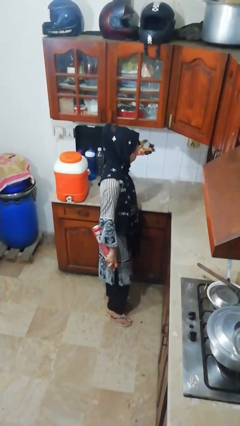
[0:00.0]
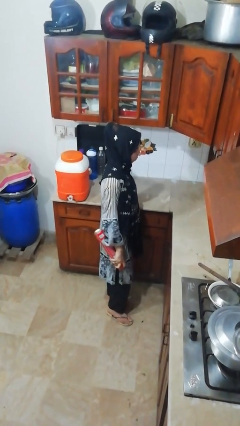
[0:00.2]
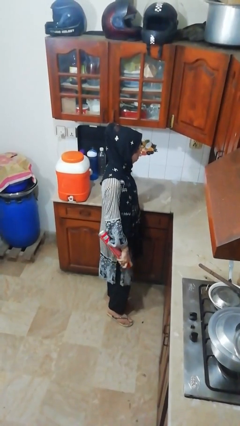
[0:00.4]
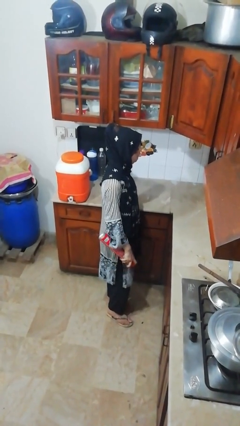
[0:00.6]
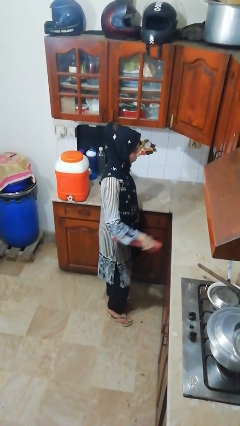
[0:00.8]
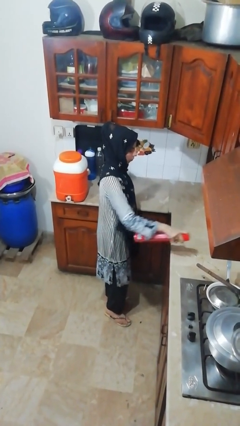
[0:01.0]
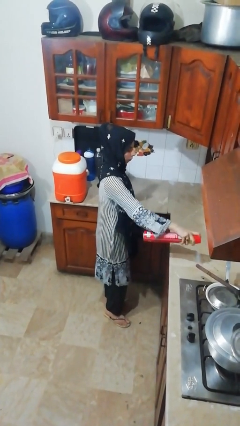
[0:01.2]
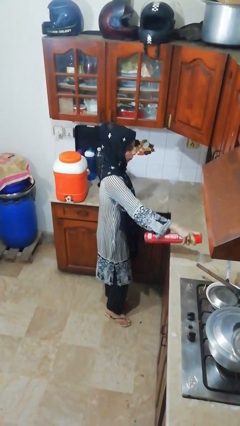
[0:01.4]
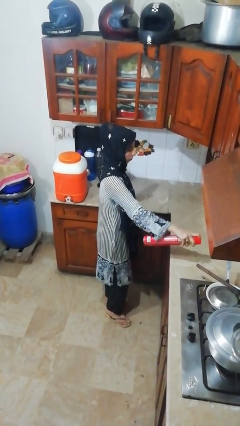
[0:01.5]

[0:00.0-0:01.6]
person sprays from bottle

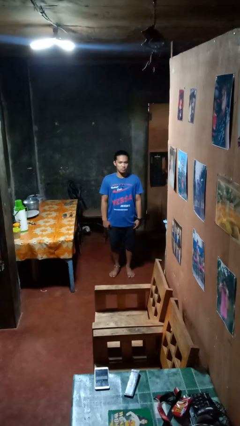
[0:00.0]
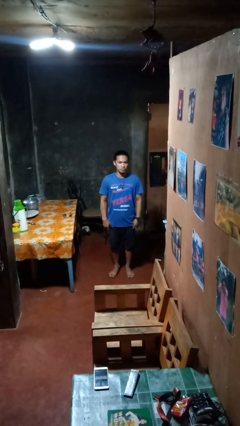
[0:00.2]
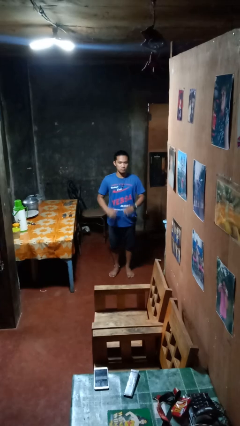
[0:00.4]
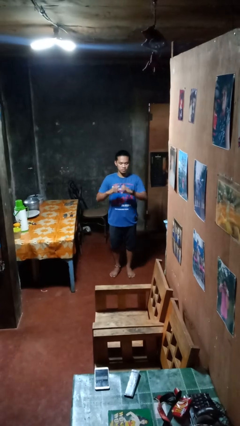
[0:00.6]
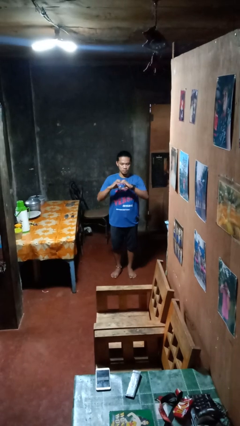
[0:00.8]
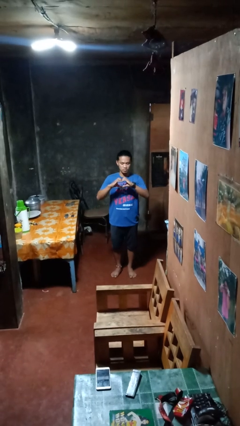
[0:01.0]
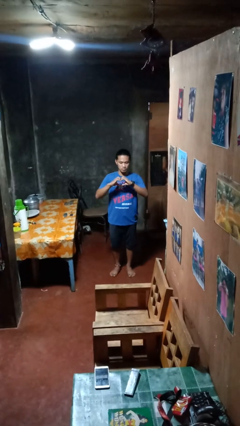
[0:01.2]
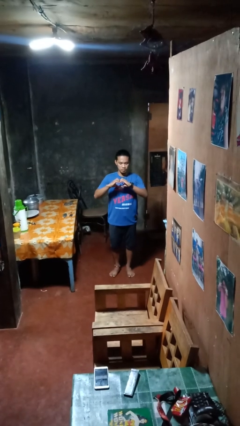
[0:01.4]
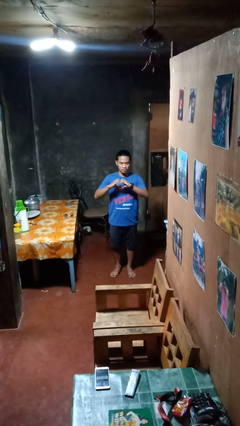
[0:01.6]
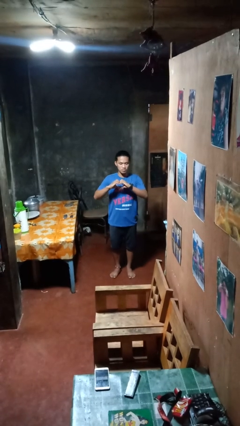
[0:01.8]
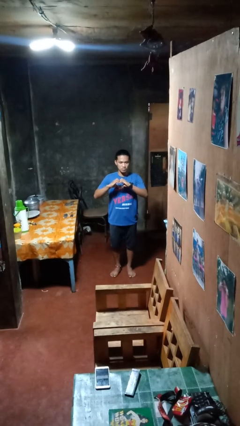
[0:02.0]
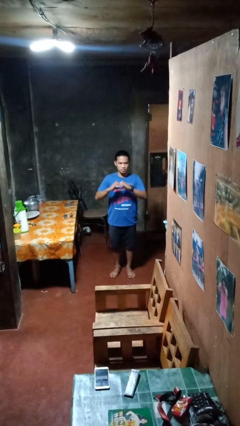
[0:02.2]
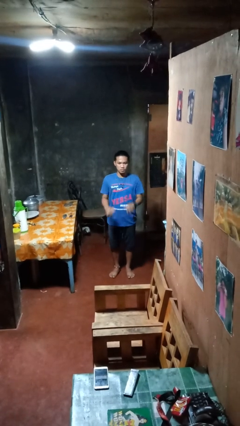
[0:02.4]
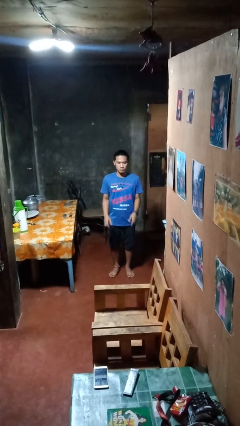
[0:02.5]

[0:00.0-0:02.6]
person gestures heart

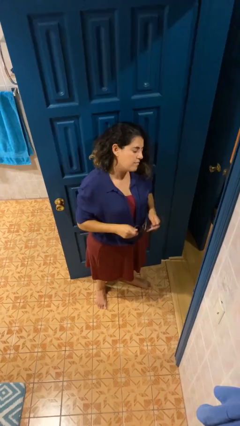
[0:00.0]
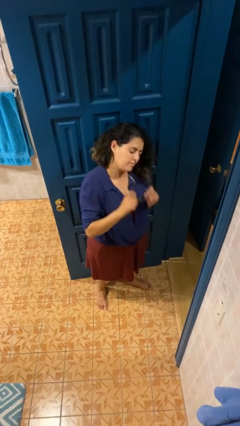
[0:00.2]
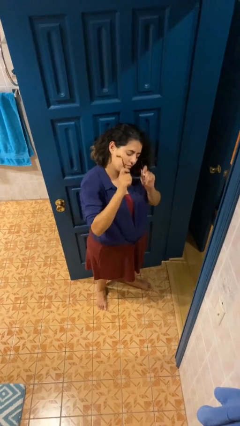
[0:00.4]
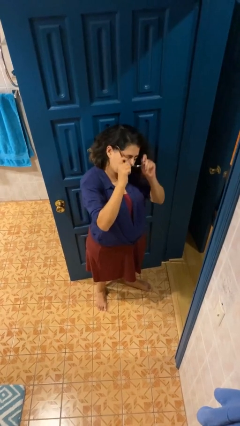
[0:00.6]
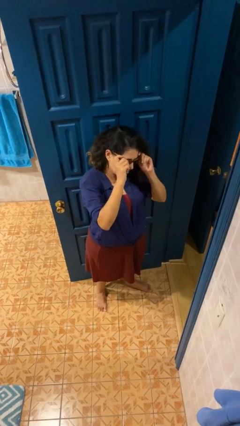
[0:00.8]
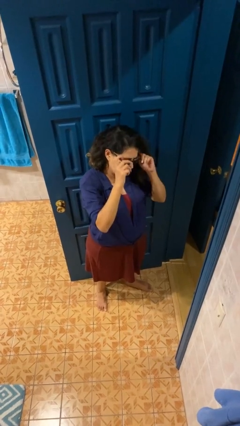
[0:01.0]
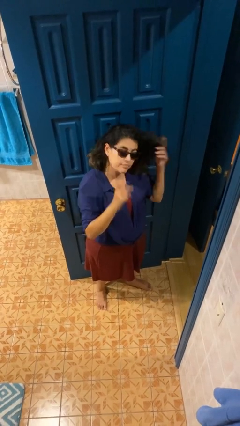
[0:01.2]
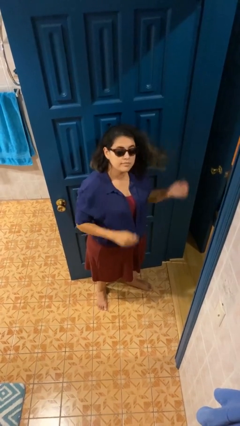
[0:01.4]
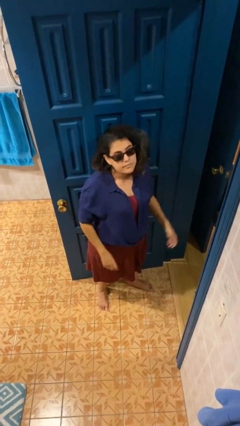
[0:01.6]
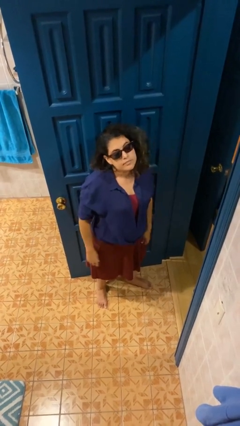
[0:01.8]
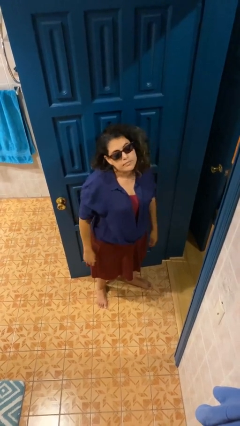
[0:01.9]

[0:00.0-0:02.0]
person puts on sunglasses

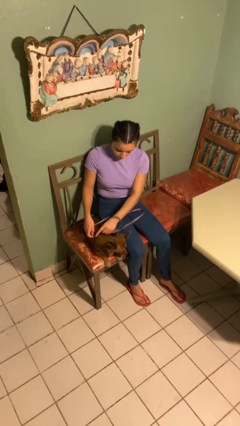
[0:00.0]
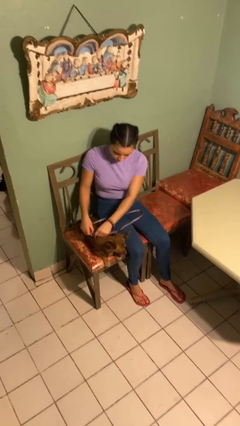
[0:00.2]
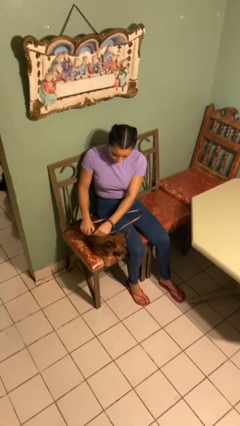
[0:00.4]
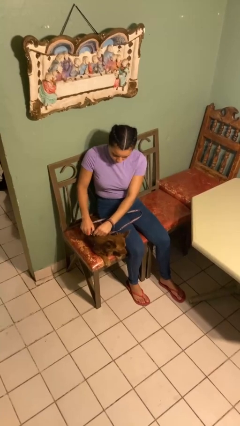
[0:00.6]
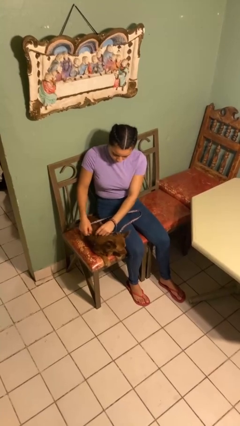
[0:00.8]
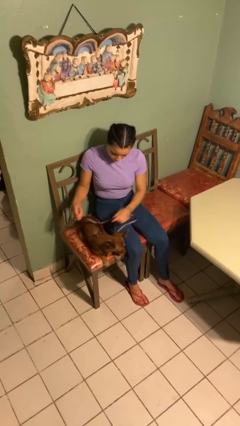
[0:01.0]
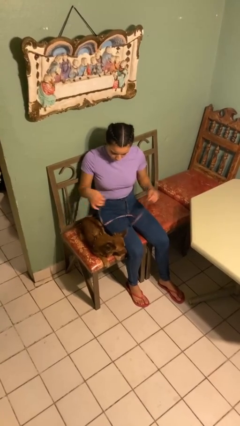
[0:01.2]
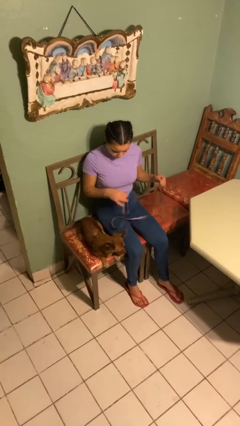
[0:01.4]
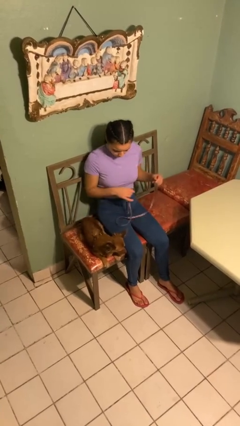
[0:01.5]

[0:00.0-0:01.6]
person unattaches leash from dog

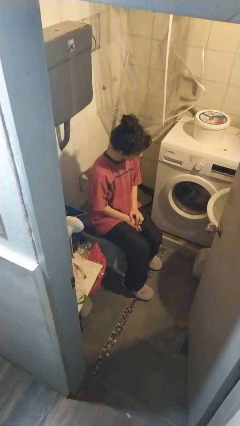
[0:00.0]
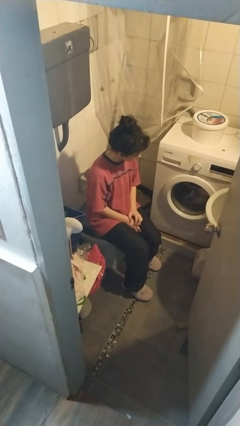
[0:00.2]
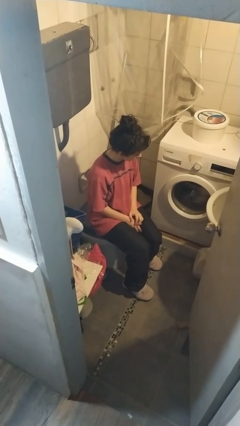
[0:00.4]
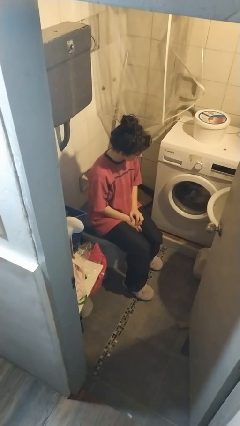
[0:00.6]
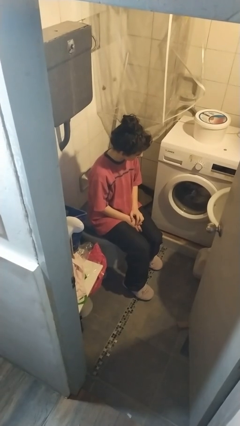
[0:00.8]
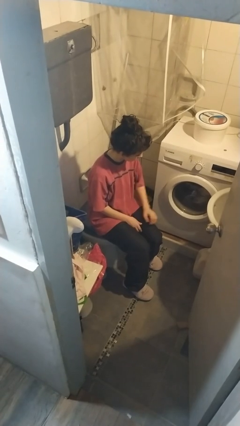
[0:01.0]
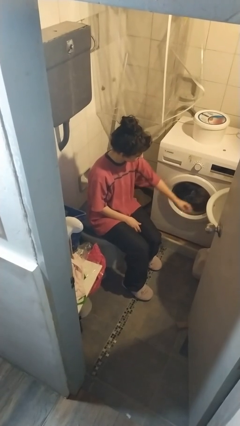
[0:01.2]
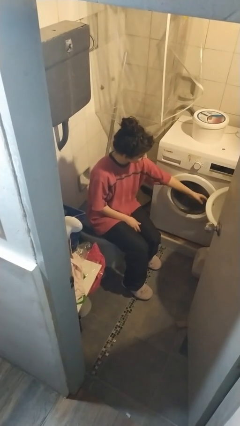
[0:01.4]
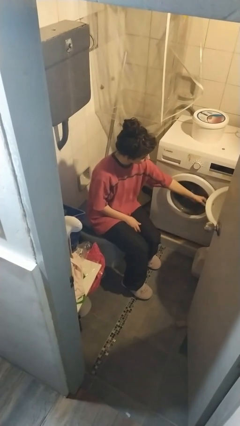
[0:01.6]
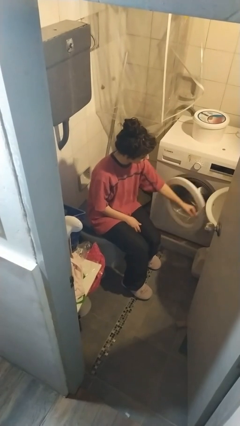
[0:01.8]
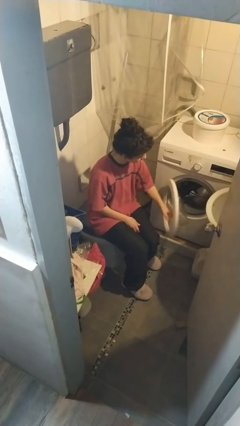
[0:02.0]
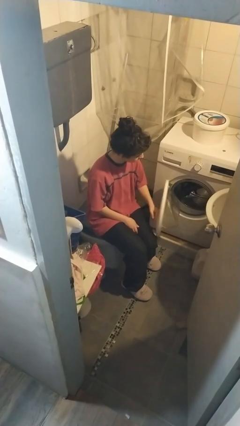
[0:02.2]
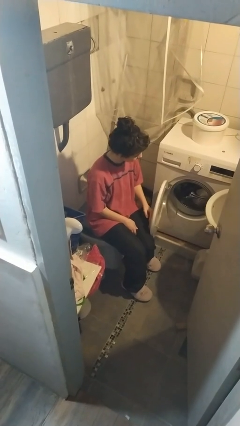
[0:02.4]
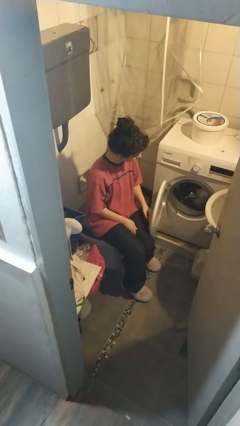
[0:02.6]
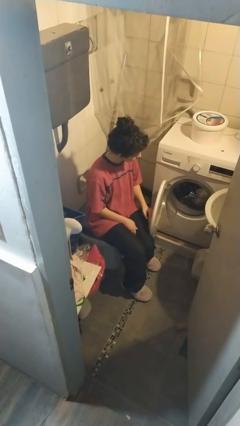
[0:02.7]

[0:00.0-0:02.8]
person opens clothes washer

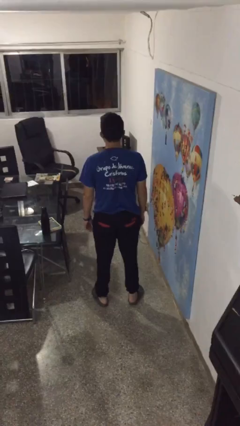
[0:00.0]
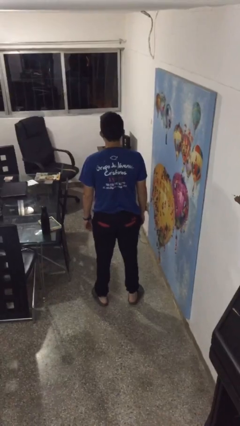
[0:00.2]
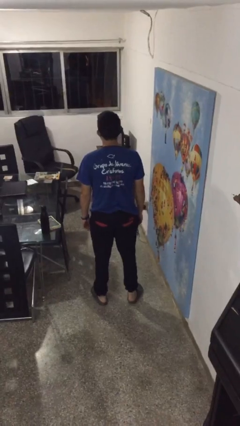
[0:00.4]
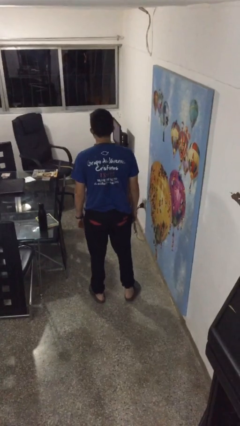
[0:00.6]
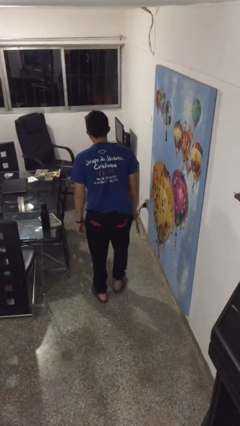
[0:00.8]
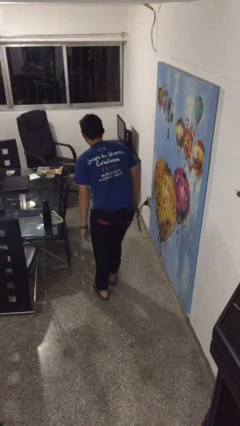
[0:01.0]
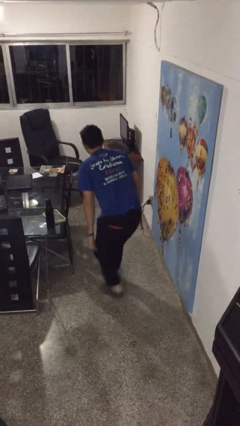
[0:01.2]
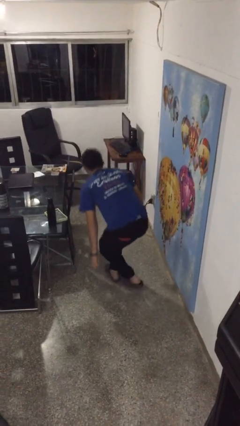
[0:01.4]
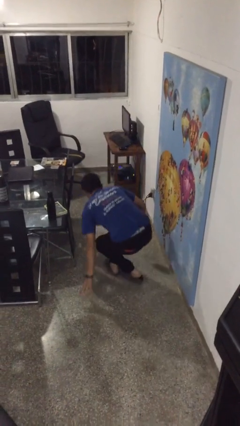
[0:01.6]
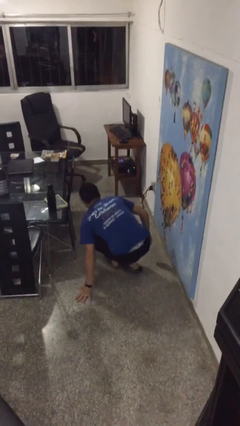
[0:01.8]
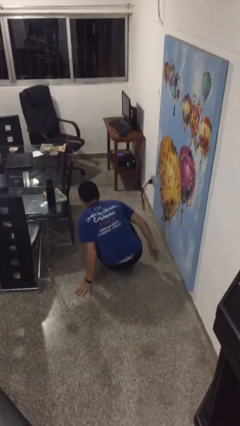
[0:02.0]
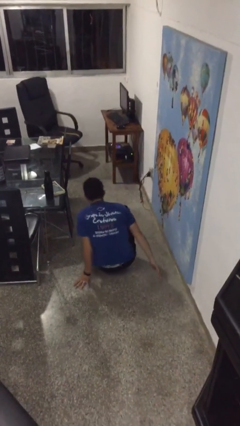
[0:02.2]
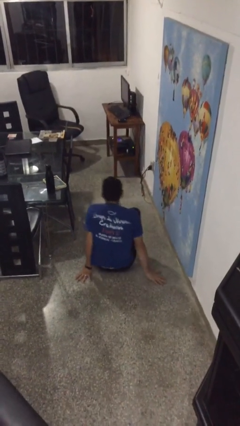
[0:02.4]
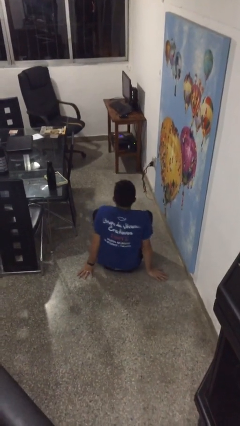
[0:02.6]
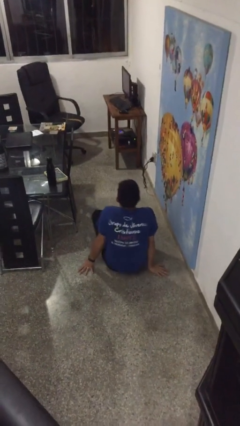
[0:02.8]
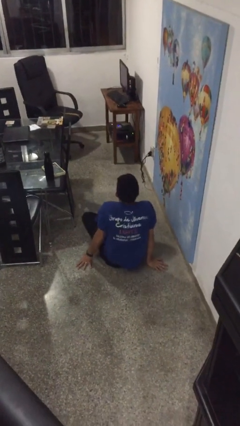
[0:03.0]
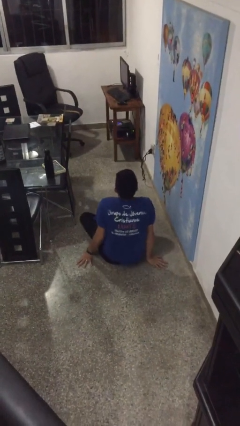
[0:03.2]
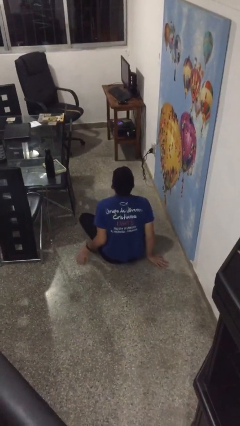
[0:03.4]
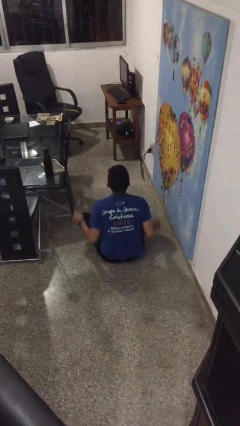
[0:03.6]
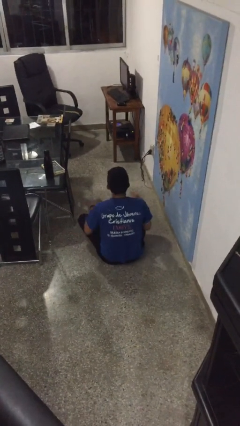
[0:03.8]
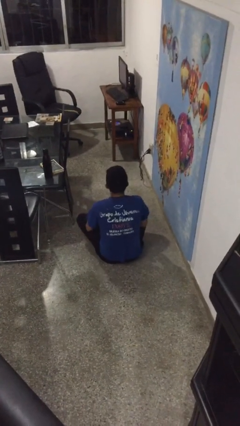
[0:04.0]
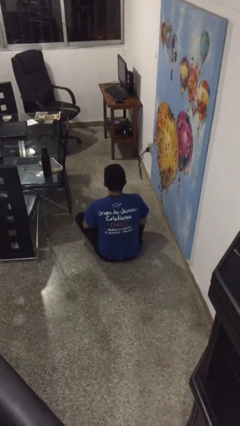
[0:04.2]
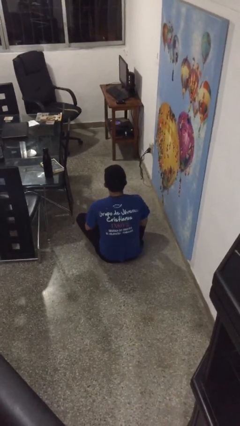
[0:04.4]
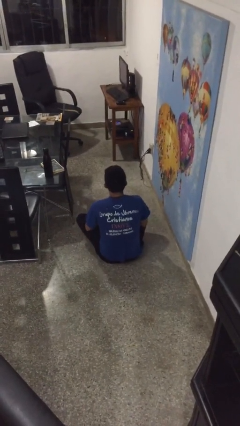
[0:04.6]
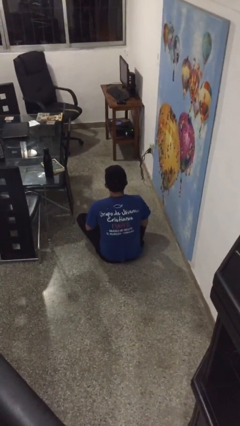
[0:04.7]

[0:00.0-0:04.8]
person sits crisscross

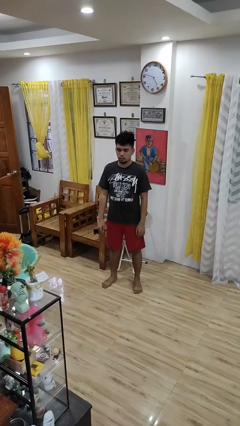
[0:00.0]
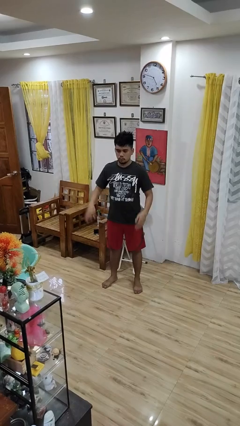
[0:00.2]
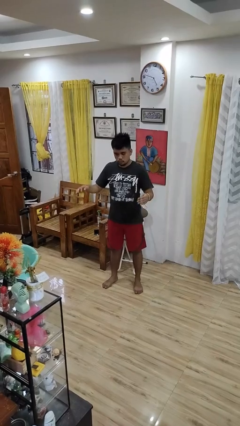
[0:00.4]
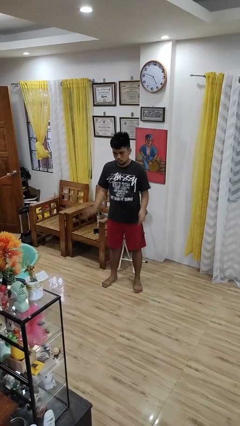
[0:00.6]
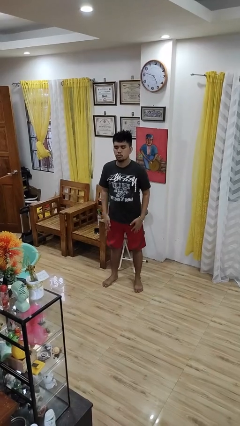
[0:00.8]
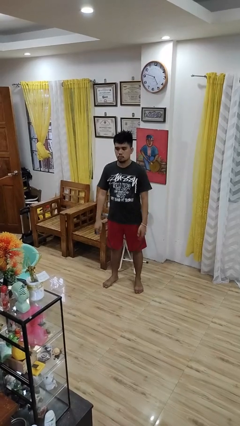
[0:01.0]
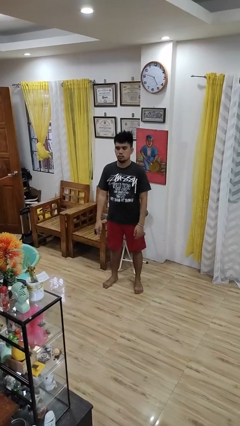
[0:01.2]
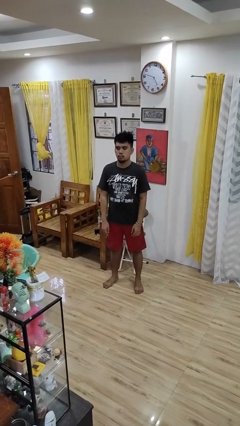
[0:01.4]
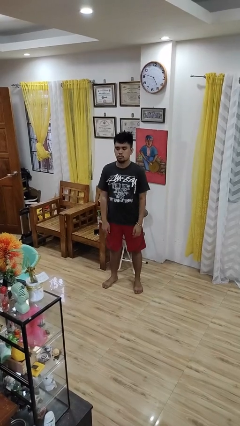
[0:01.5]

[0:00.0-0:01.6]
person slaps hands on thighs
